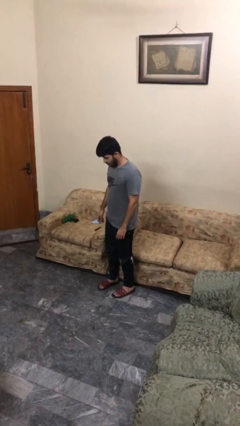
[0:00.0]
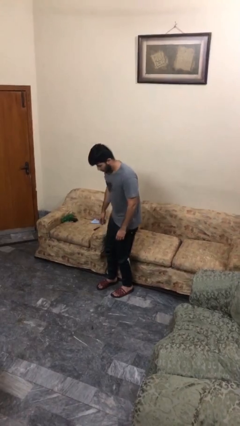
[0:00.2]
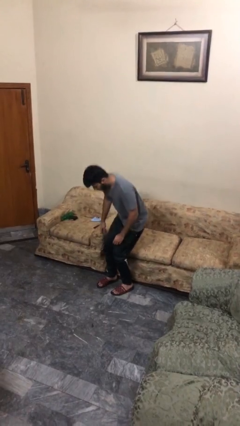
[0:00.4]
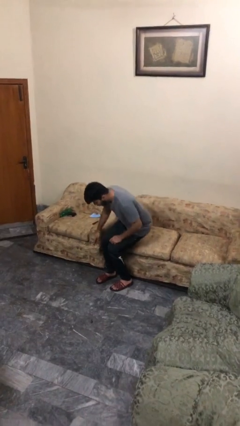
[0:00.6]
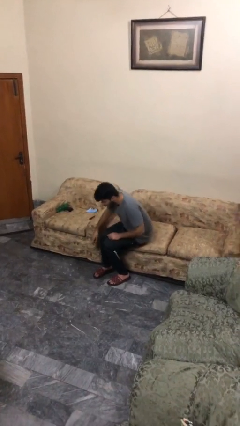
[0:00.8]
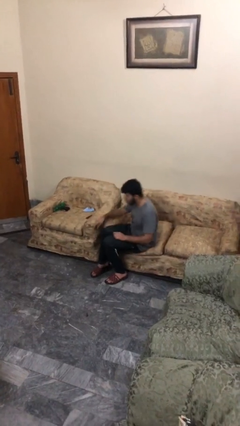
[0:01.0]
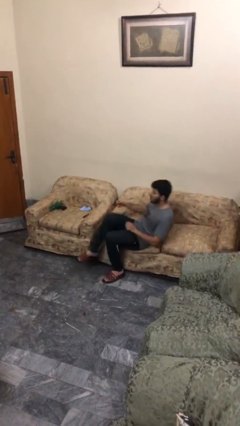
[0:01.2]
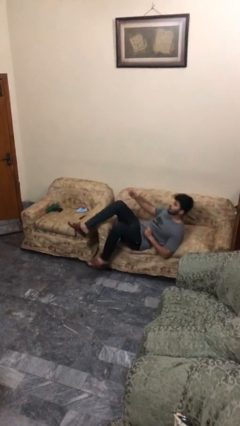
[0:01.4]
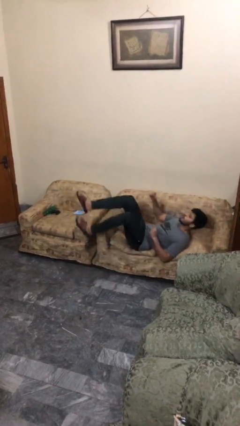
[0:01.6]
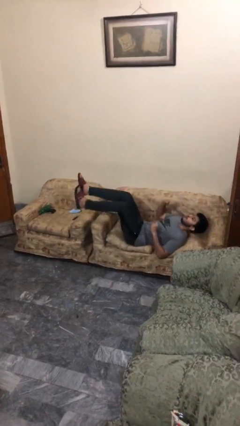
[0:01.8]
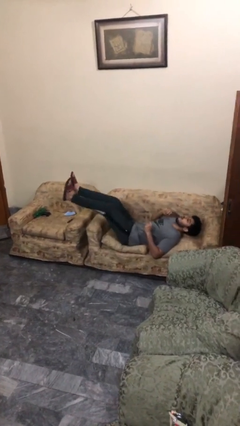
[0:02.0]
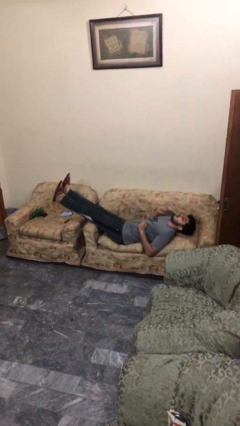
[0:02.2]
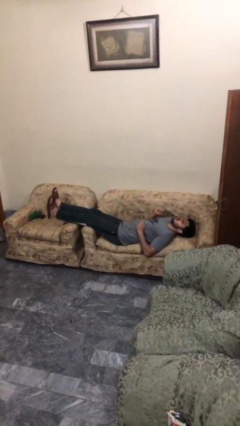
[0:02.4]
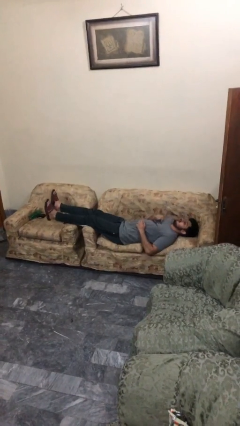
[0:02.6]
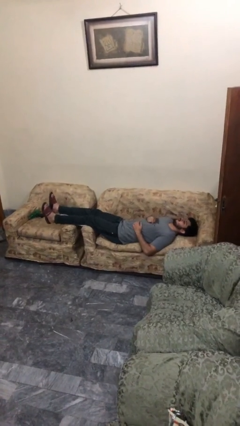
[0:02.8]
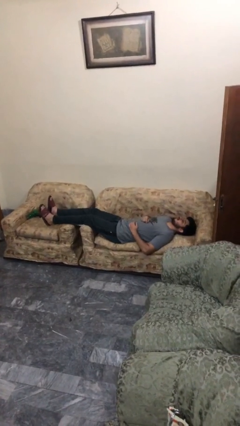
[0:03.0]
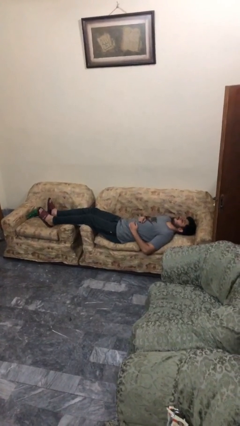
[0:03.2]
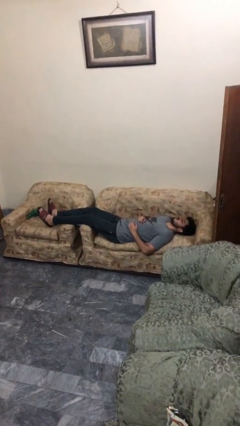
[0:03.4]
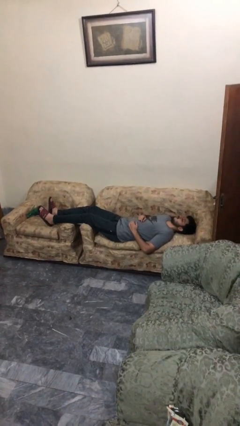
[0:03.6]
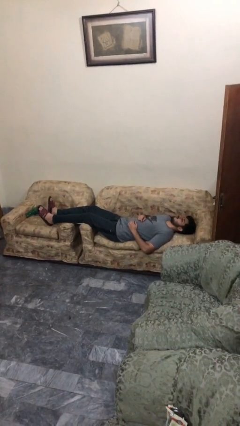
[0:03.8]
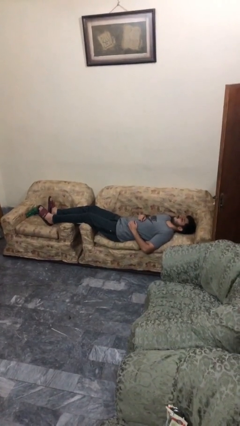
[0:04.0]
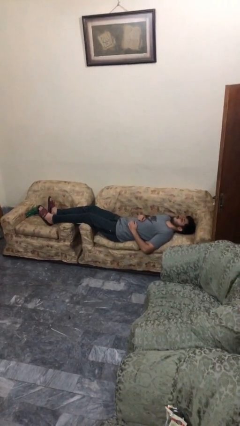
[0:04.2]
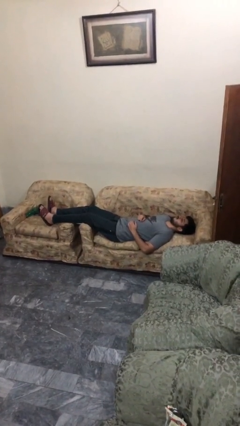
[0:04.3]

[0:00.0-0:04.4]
person lies down on couch

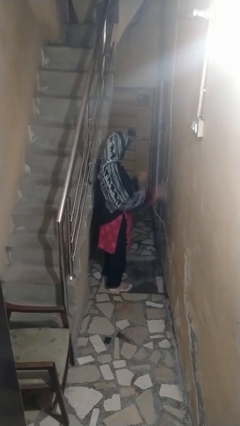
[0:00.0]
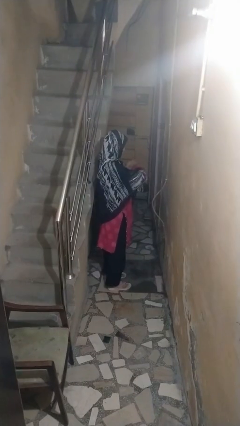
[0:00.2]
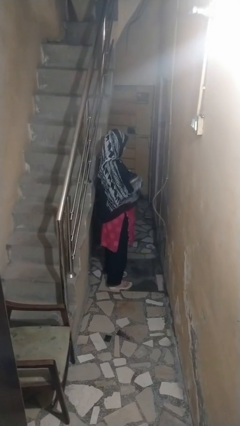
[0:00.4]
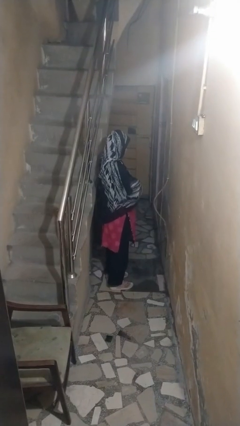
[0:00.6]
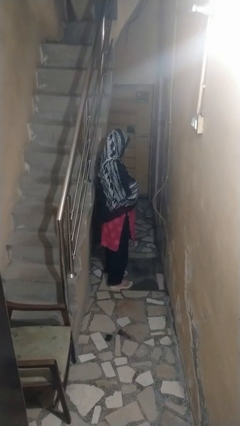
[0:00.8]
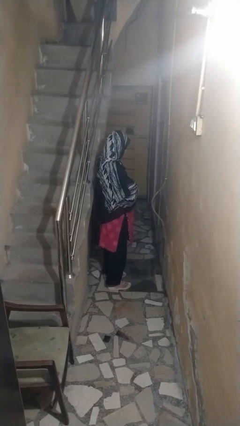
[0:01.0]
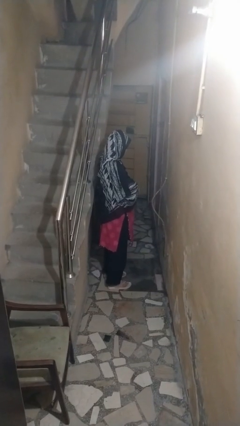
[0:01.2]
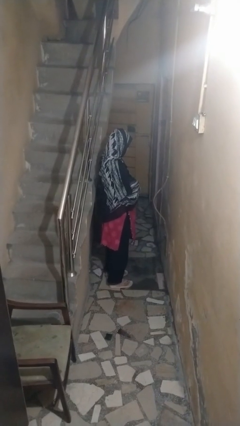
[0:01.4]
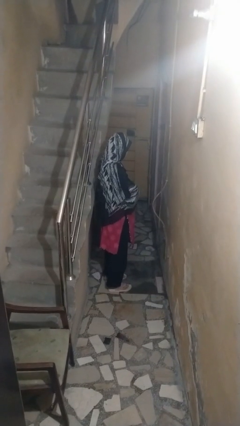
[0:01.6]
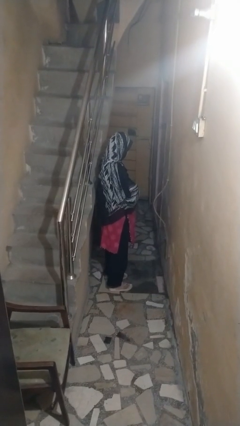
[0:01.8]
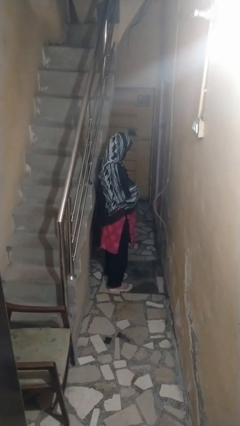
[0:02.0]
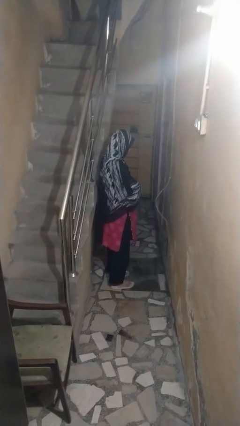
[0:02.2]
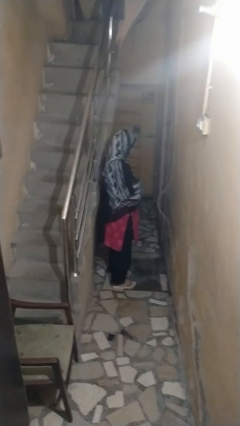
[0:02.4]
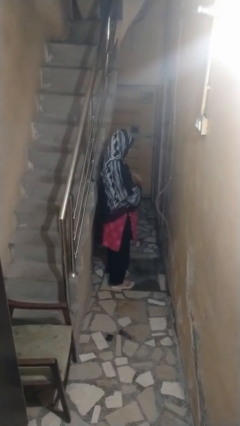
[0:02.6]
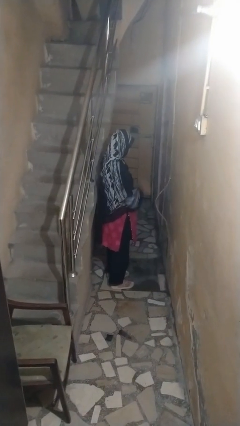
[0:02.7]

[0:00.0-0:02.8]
person crosses arms

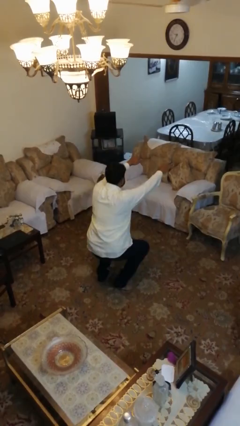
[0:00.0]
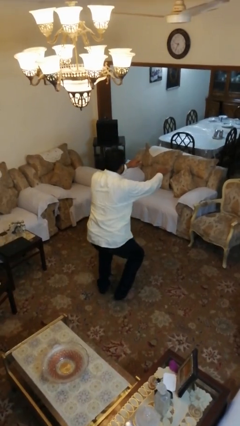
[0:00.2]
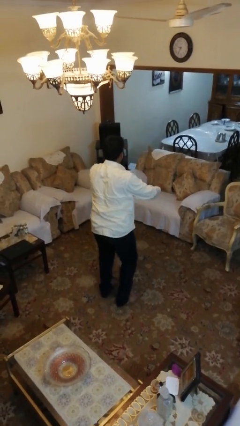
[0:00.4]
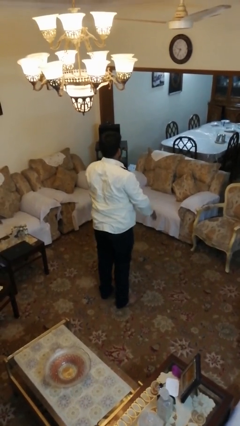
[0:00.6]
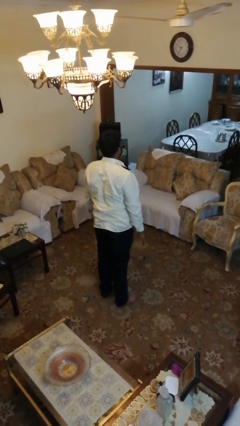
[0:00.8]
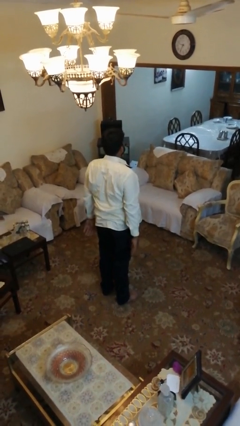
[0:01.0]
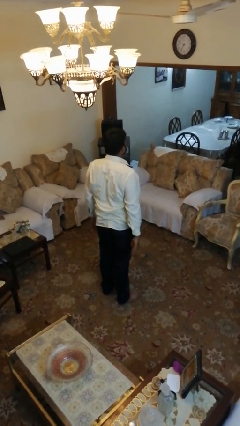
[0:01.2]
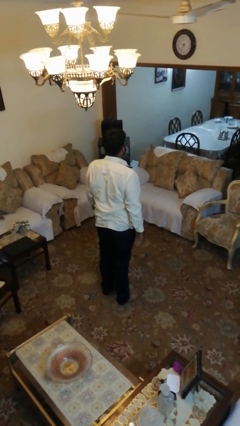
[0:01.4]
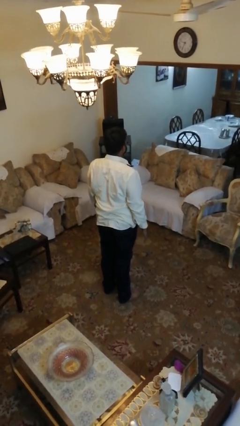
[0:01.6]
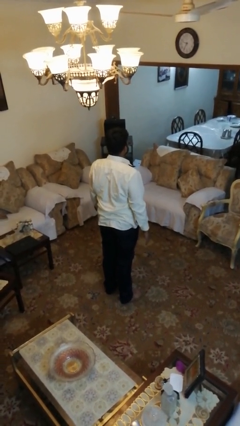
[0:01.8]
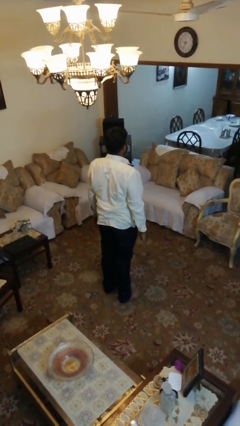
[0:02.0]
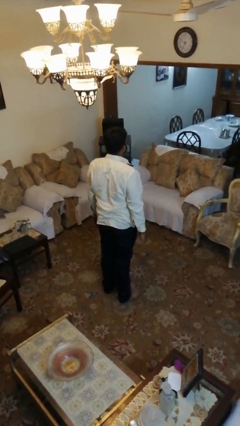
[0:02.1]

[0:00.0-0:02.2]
person stands up

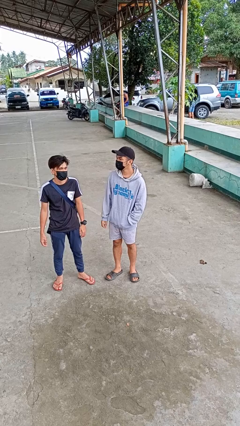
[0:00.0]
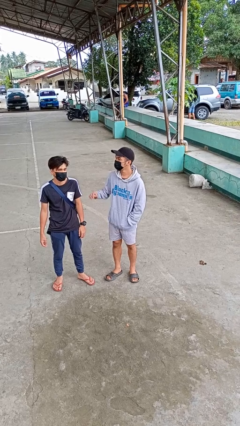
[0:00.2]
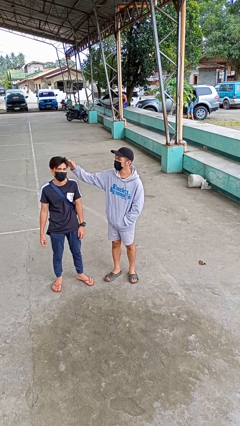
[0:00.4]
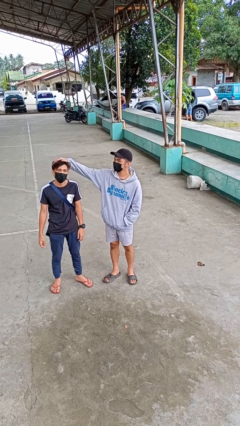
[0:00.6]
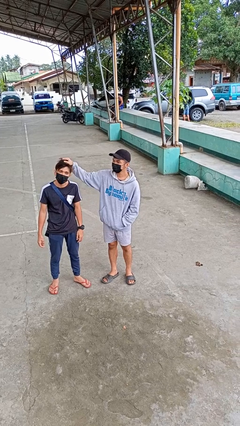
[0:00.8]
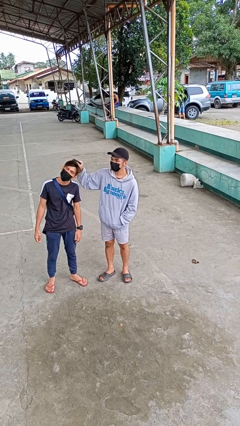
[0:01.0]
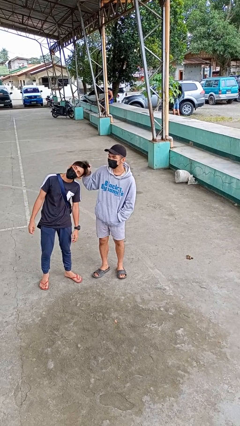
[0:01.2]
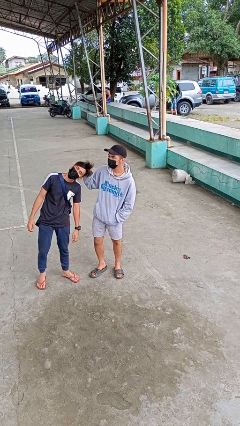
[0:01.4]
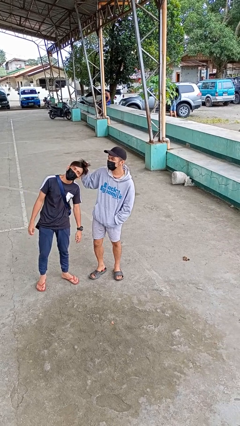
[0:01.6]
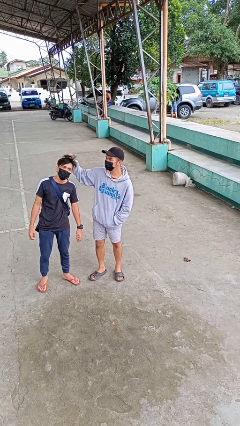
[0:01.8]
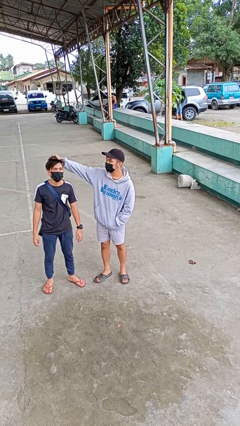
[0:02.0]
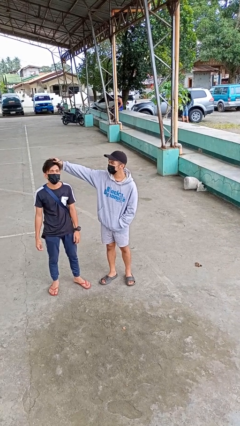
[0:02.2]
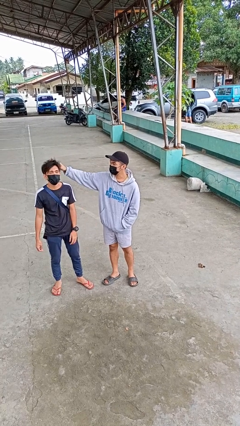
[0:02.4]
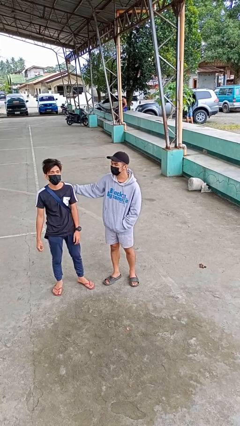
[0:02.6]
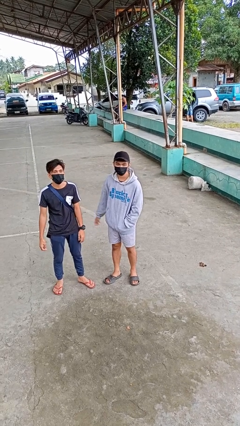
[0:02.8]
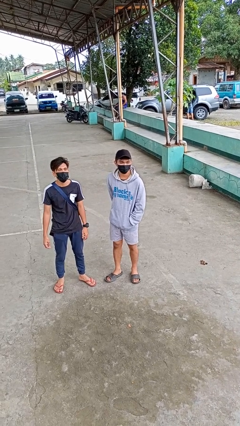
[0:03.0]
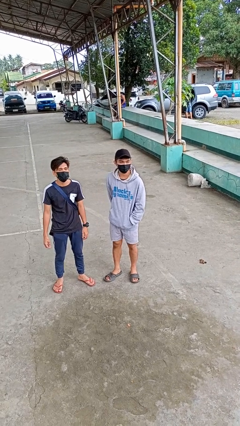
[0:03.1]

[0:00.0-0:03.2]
person grabs person by hair

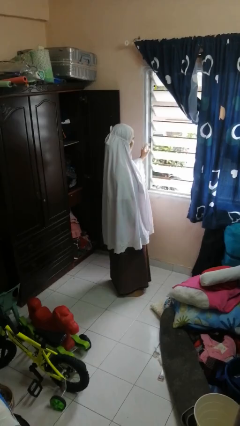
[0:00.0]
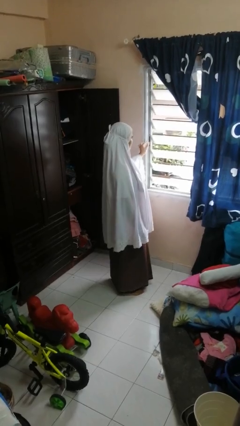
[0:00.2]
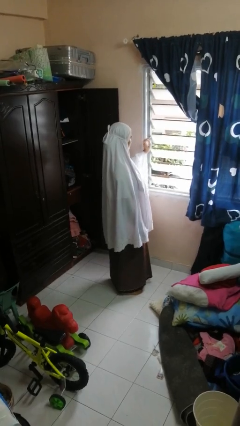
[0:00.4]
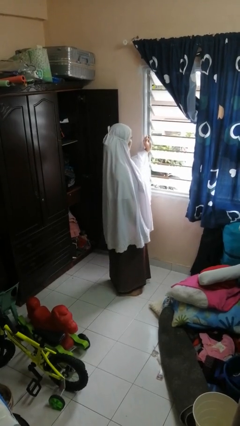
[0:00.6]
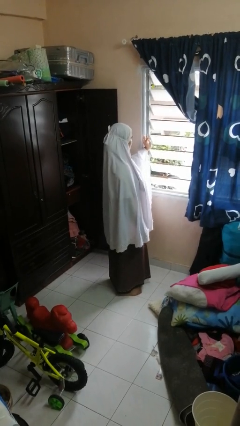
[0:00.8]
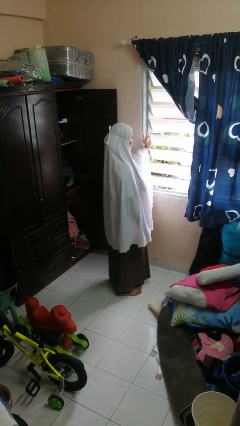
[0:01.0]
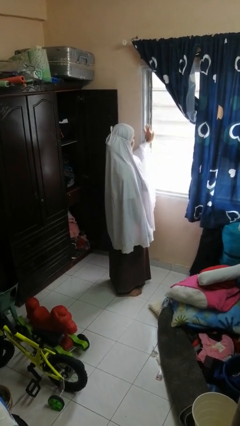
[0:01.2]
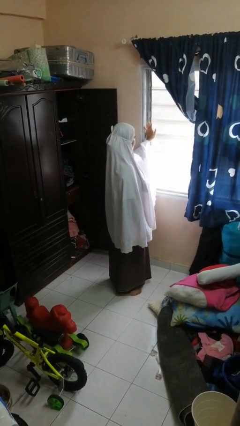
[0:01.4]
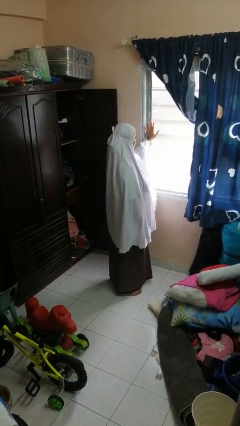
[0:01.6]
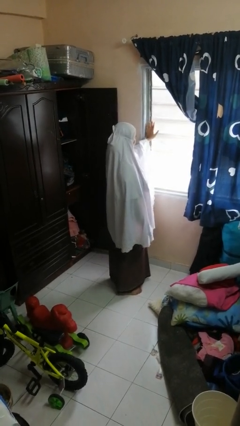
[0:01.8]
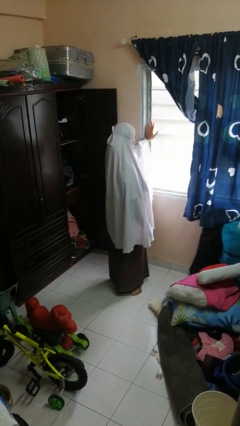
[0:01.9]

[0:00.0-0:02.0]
person closes home window

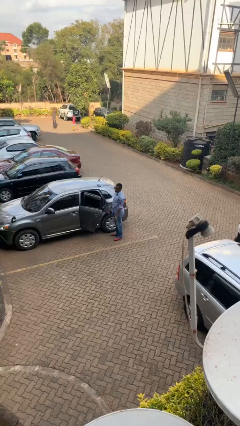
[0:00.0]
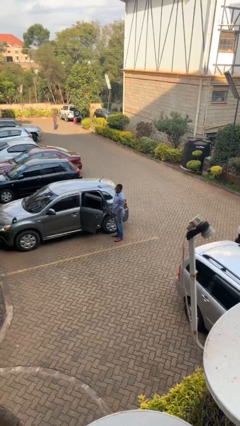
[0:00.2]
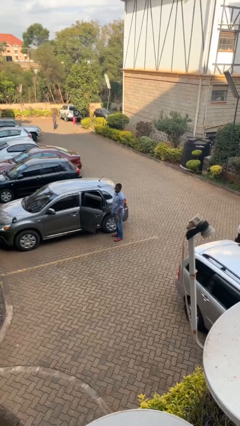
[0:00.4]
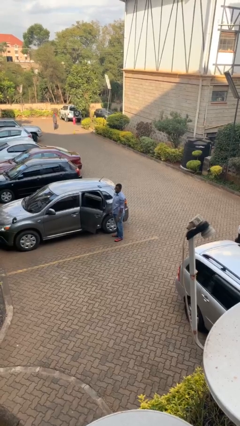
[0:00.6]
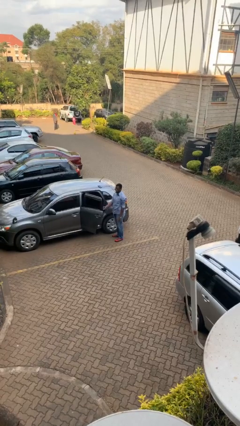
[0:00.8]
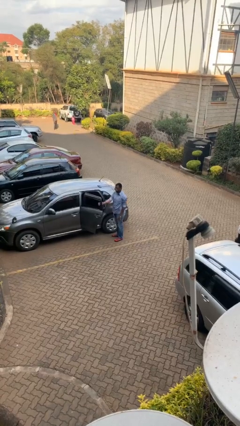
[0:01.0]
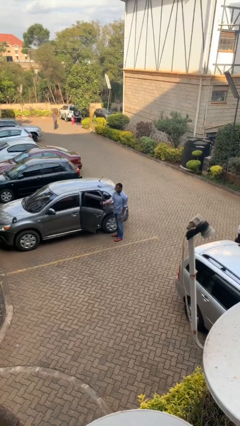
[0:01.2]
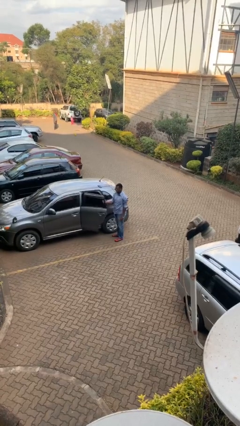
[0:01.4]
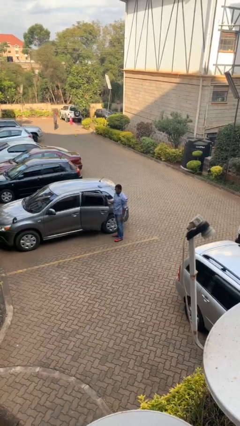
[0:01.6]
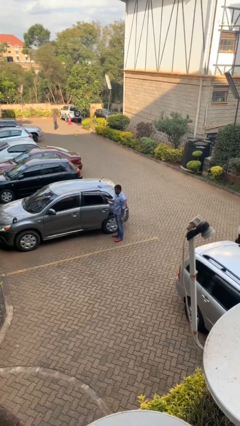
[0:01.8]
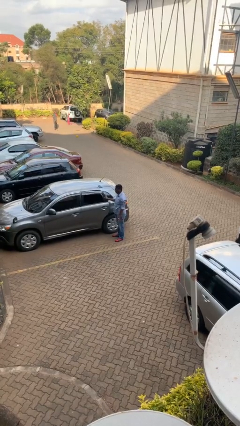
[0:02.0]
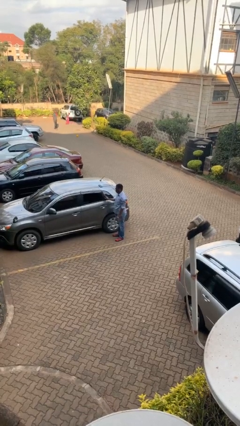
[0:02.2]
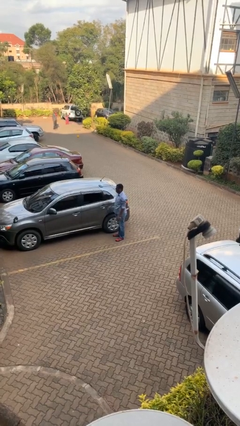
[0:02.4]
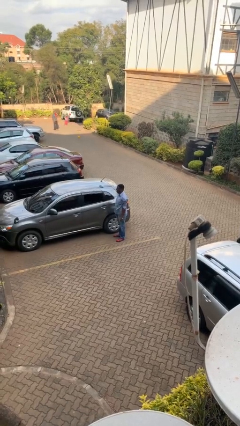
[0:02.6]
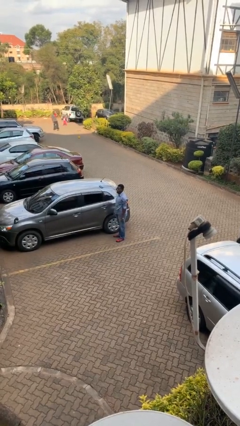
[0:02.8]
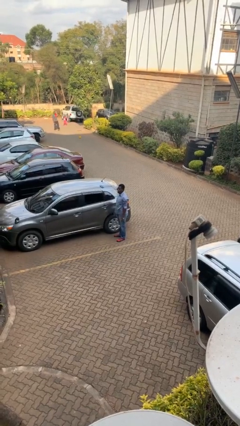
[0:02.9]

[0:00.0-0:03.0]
person closes car door
